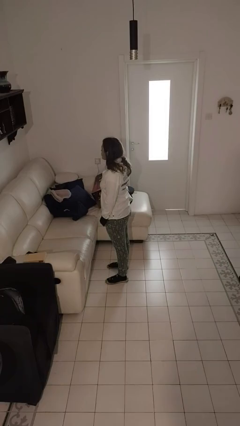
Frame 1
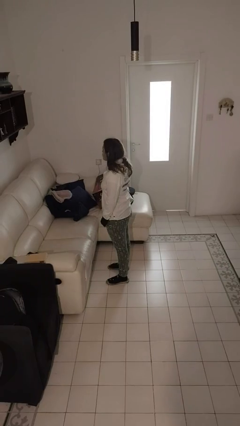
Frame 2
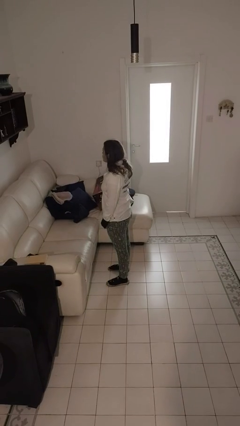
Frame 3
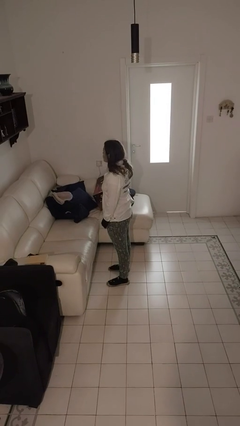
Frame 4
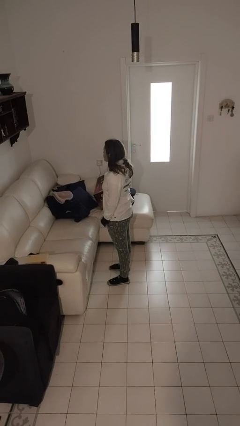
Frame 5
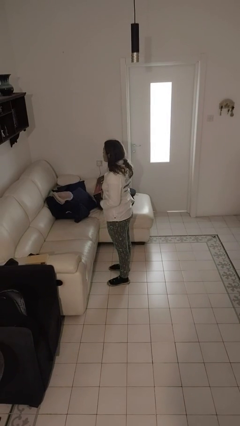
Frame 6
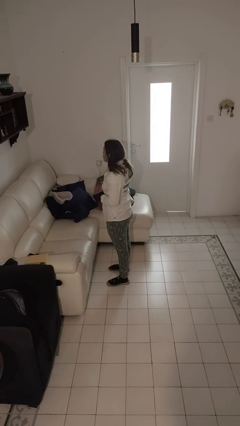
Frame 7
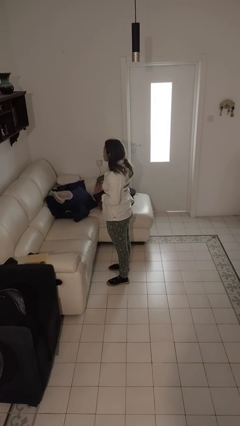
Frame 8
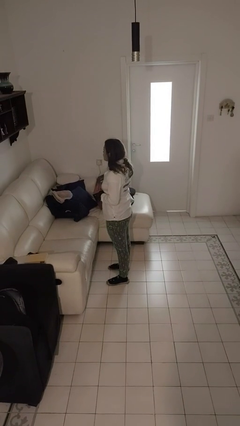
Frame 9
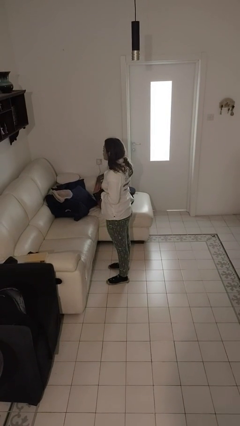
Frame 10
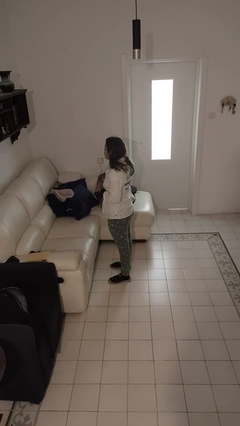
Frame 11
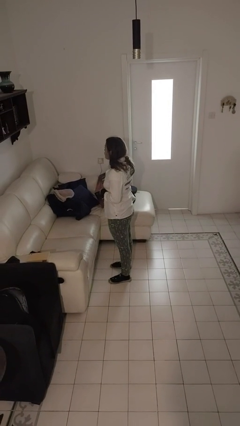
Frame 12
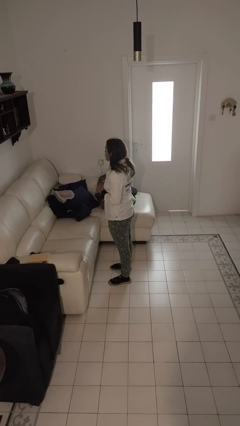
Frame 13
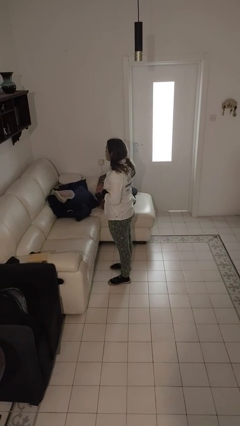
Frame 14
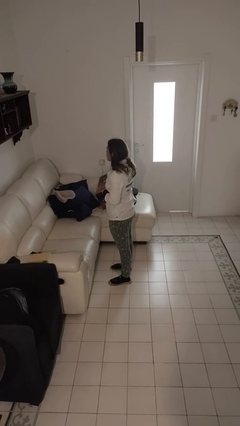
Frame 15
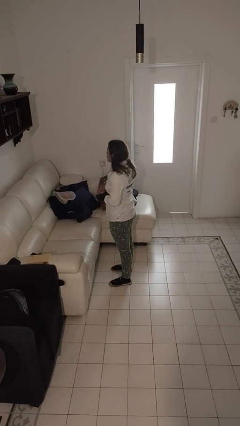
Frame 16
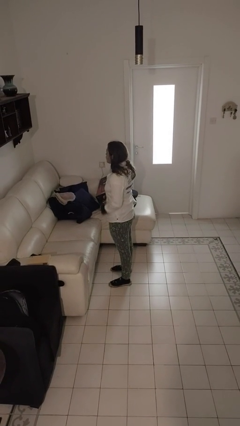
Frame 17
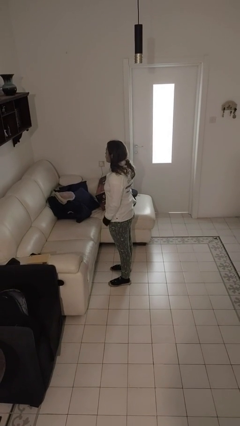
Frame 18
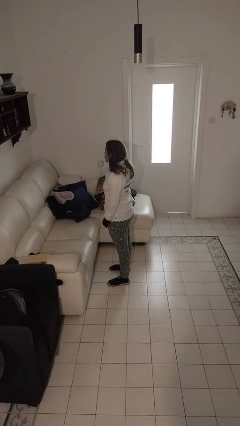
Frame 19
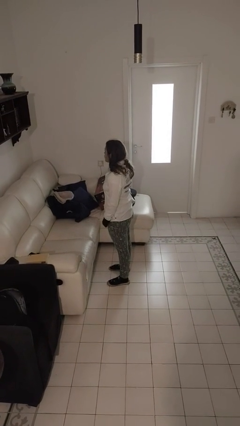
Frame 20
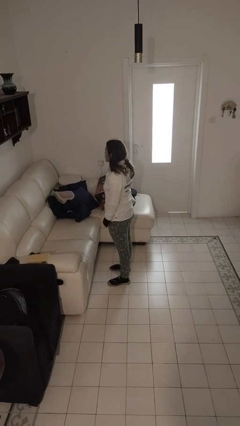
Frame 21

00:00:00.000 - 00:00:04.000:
person buttons shirt

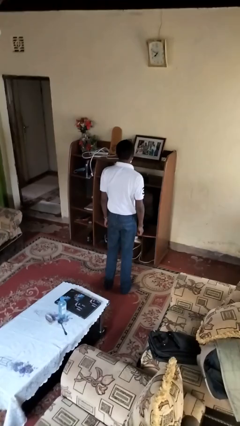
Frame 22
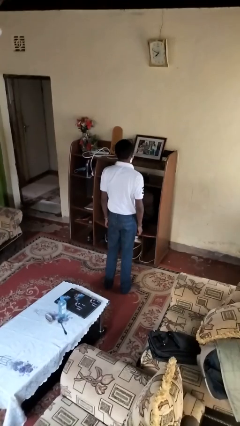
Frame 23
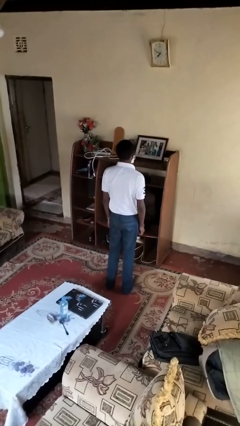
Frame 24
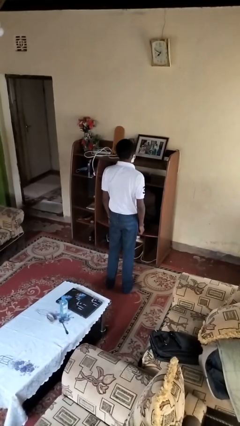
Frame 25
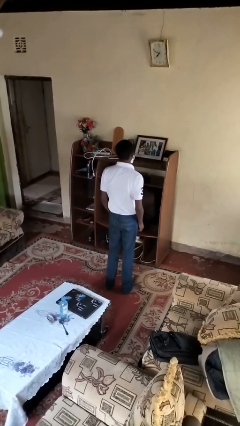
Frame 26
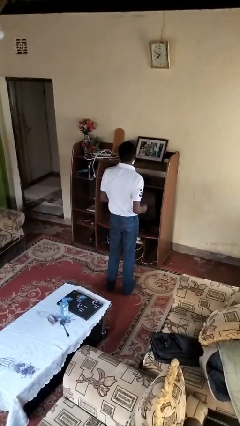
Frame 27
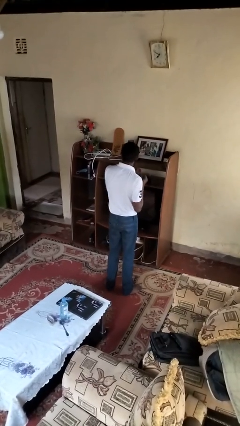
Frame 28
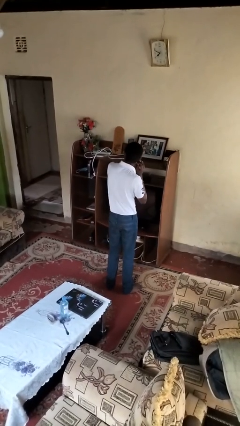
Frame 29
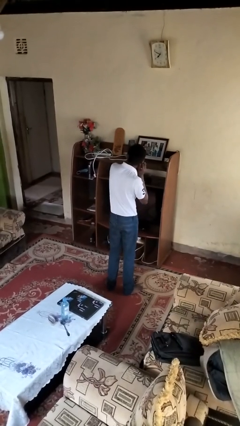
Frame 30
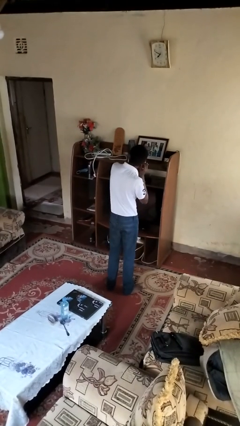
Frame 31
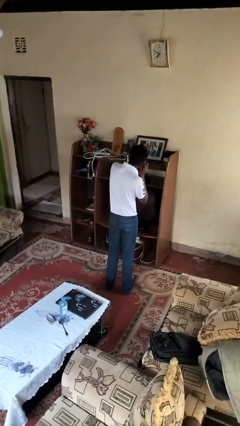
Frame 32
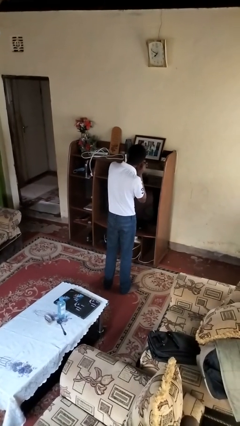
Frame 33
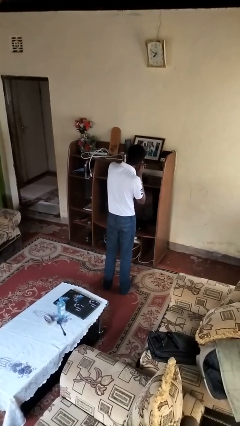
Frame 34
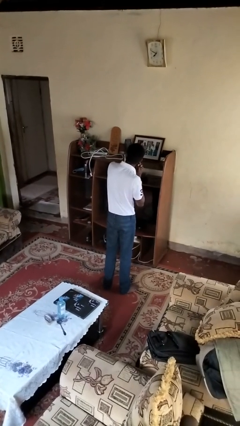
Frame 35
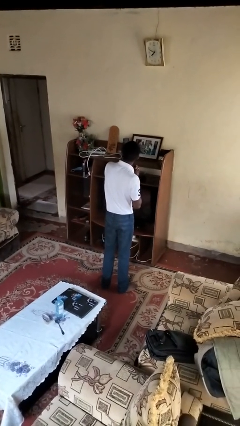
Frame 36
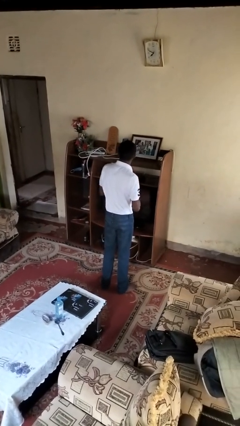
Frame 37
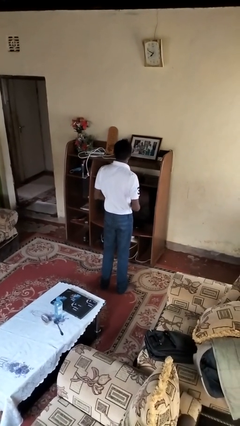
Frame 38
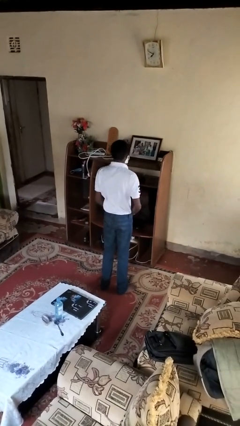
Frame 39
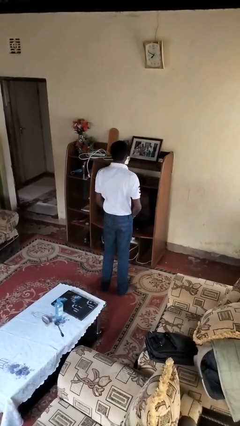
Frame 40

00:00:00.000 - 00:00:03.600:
person takes off earrings

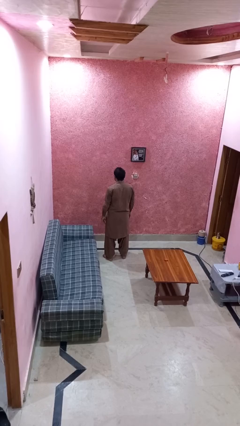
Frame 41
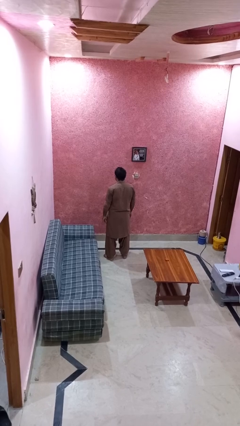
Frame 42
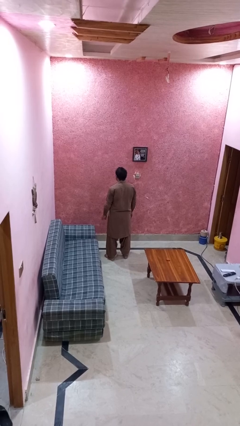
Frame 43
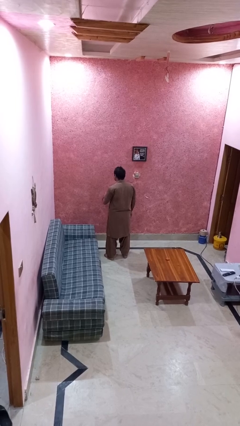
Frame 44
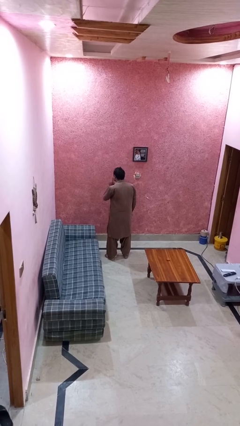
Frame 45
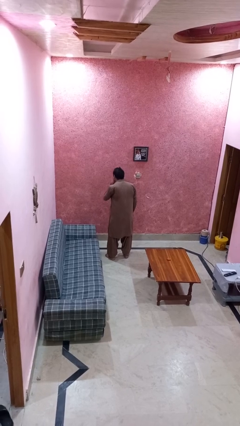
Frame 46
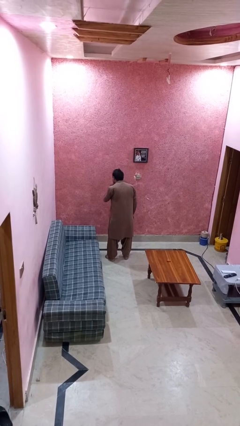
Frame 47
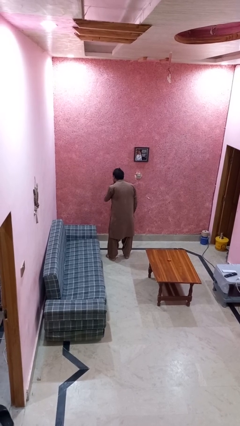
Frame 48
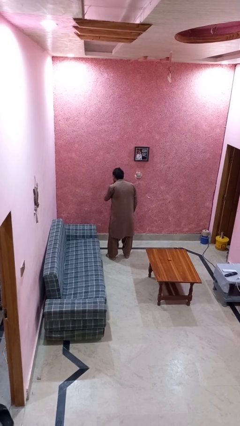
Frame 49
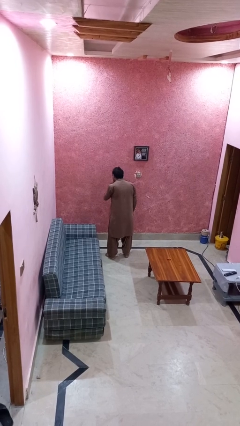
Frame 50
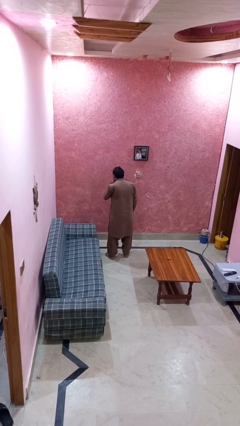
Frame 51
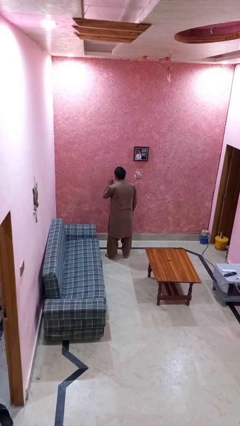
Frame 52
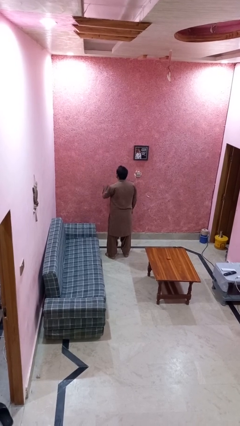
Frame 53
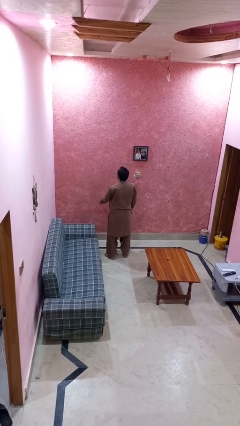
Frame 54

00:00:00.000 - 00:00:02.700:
person gestures be quiet

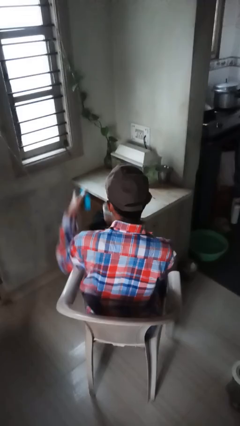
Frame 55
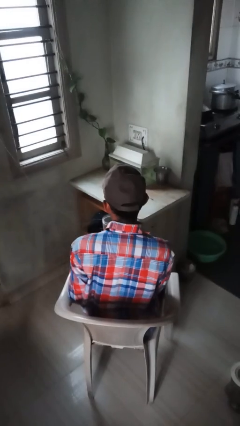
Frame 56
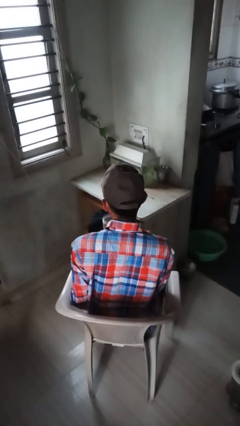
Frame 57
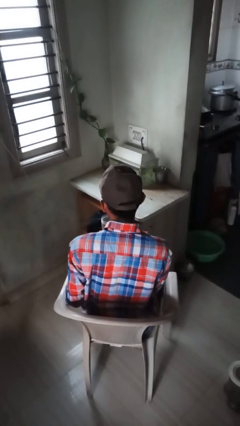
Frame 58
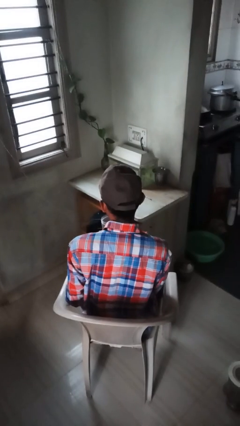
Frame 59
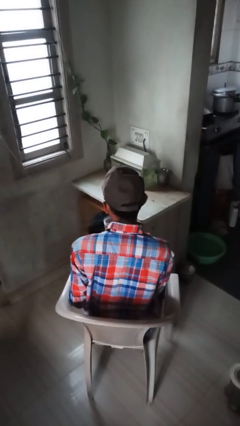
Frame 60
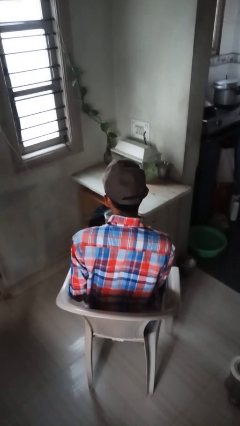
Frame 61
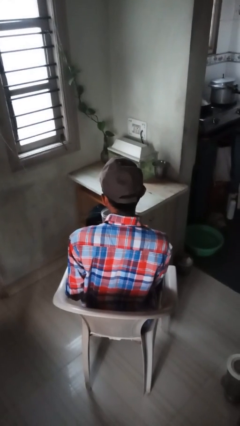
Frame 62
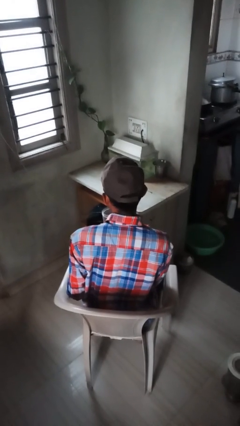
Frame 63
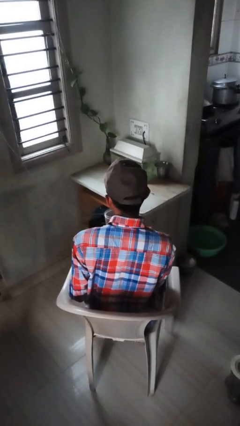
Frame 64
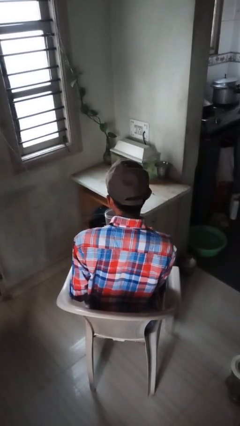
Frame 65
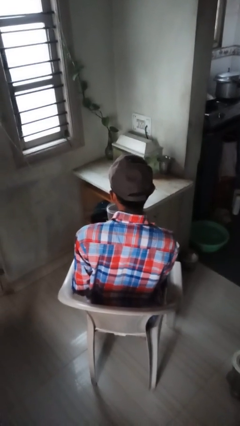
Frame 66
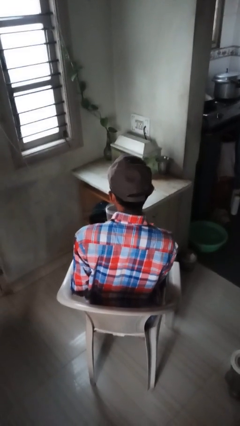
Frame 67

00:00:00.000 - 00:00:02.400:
person opens jar

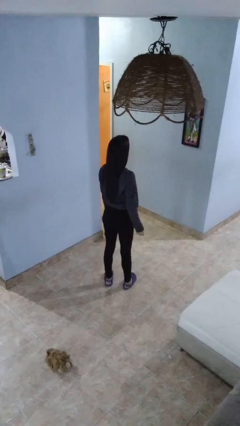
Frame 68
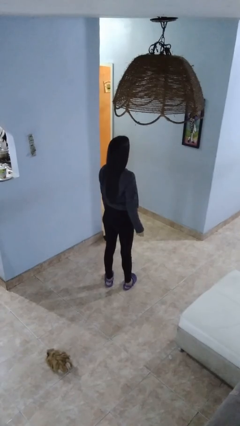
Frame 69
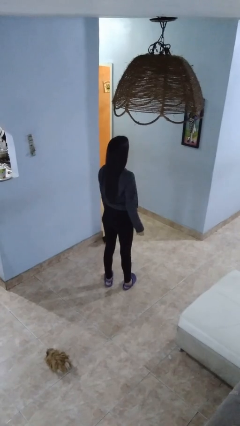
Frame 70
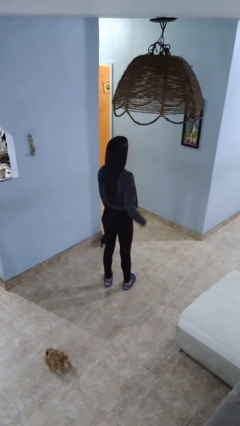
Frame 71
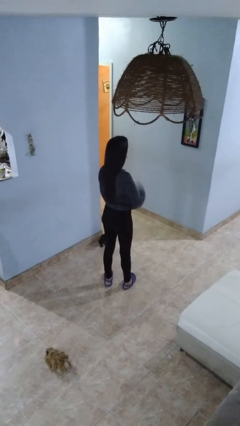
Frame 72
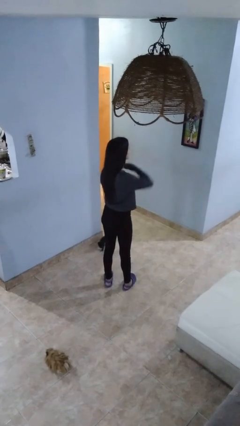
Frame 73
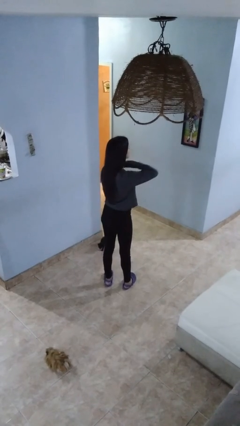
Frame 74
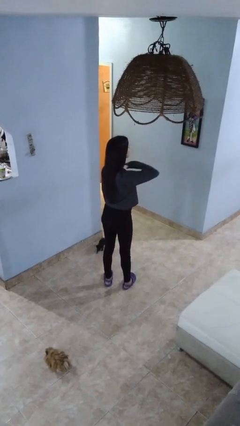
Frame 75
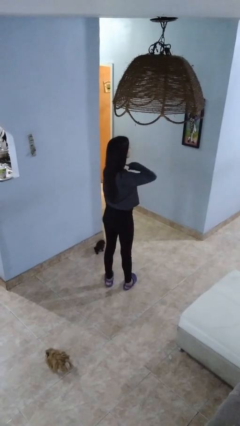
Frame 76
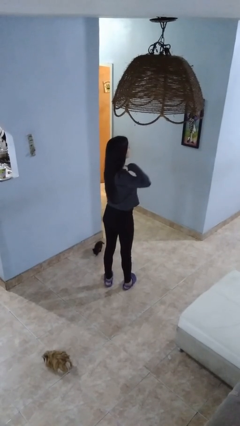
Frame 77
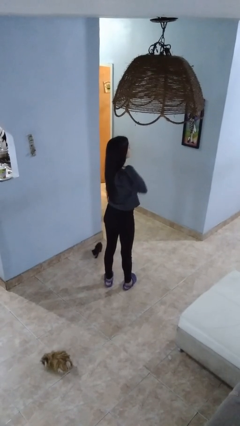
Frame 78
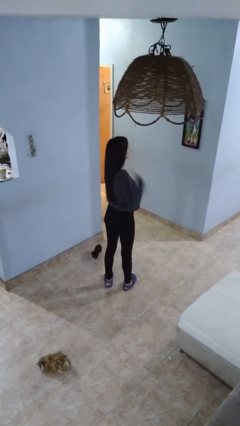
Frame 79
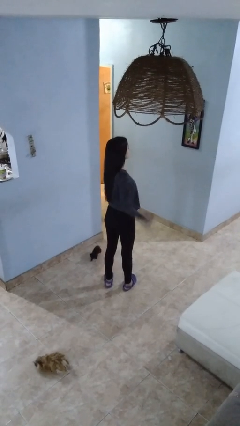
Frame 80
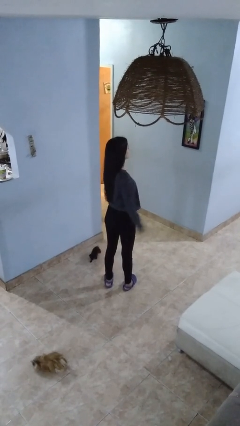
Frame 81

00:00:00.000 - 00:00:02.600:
person gestures cut

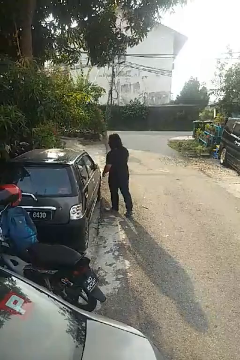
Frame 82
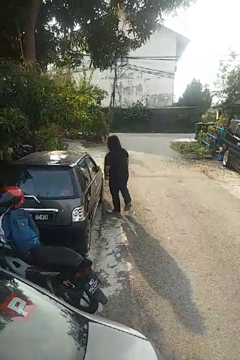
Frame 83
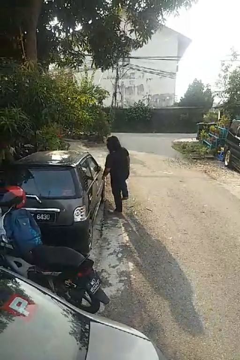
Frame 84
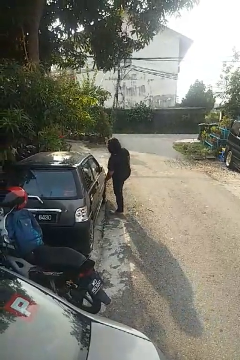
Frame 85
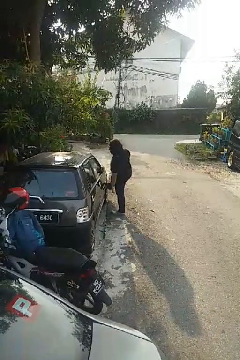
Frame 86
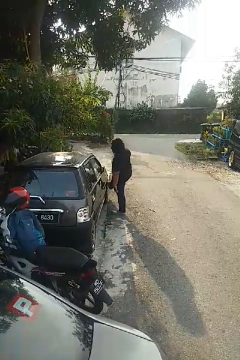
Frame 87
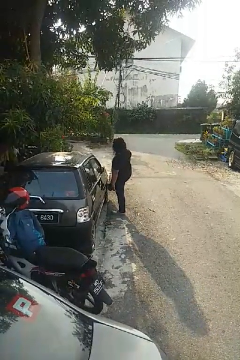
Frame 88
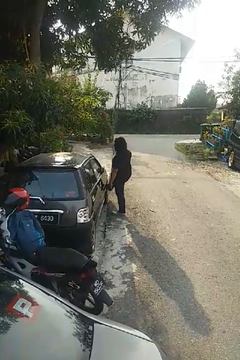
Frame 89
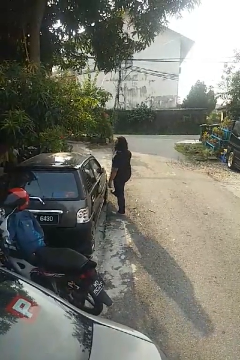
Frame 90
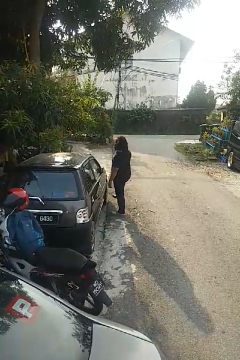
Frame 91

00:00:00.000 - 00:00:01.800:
person kicks car tires
